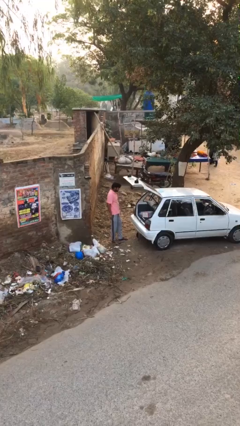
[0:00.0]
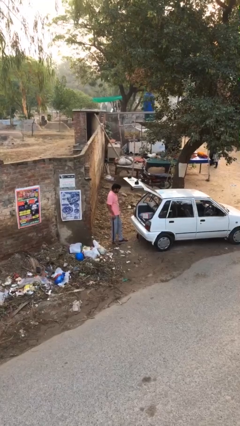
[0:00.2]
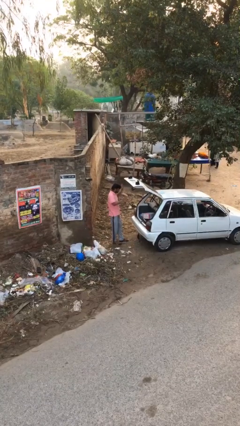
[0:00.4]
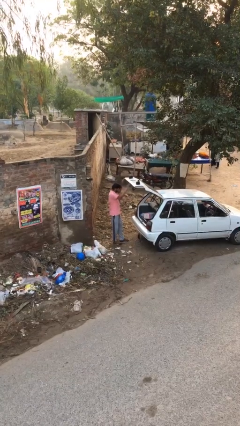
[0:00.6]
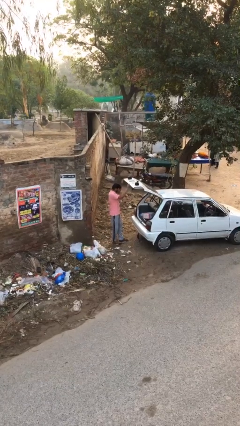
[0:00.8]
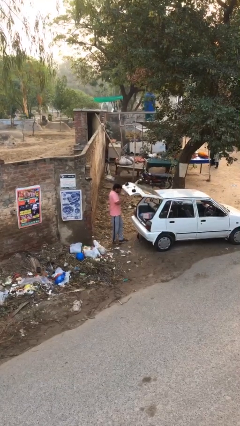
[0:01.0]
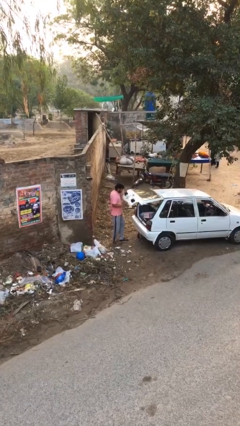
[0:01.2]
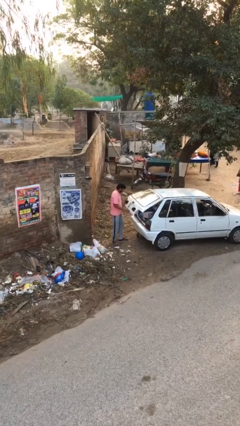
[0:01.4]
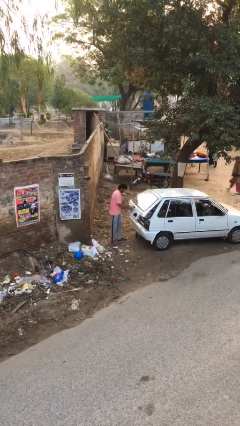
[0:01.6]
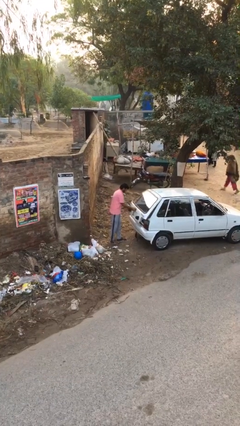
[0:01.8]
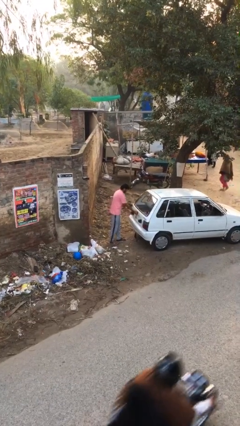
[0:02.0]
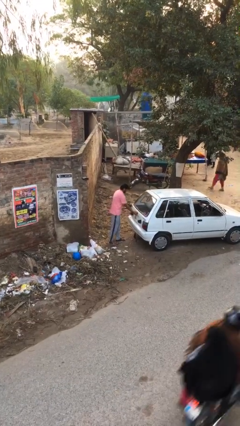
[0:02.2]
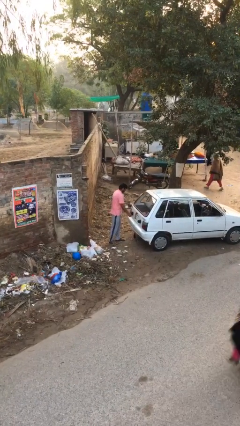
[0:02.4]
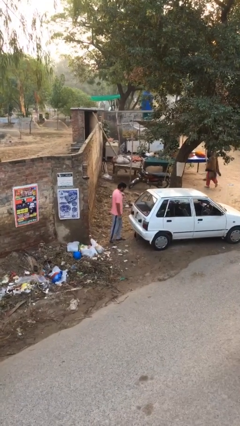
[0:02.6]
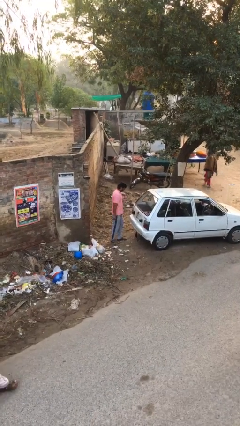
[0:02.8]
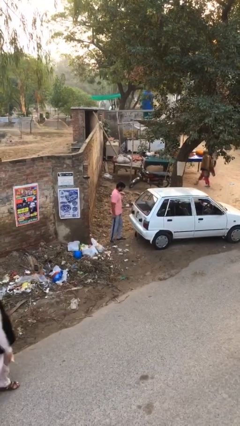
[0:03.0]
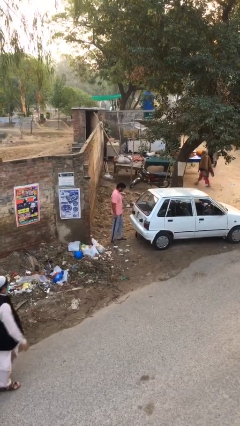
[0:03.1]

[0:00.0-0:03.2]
person closes car trunk

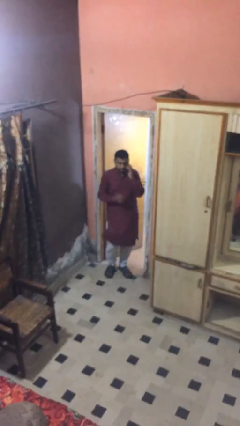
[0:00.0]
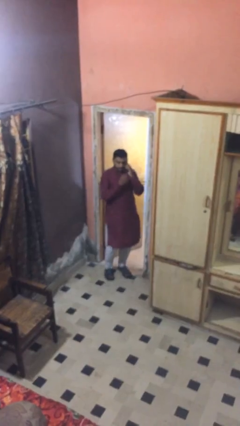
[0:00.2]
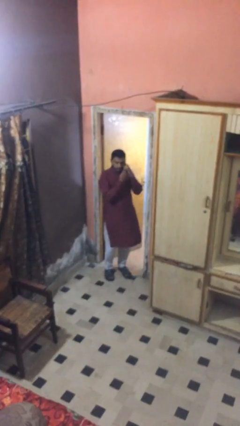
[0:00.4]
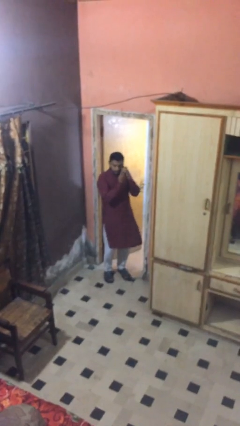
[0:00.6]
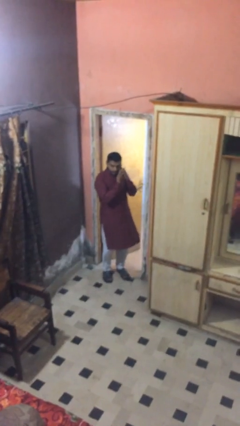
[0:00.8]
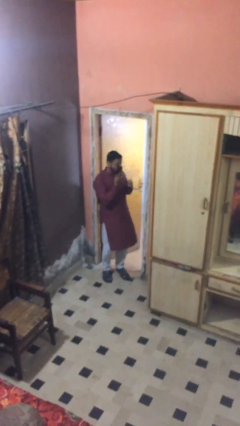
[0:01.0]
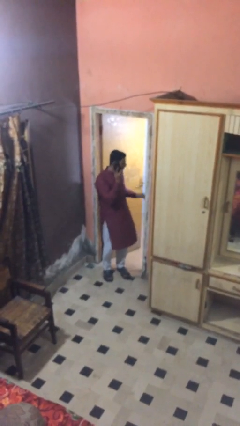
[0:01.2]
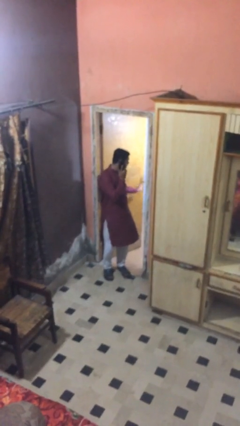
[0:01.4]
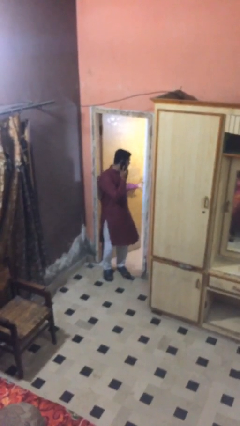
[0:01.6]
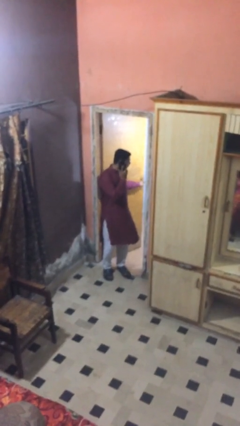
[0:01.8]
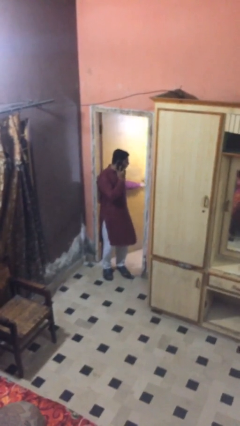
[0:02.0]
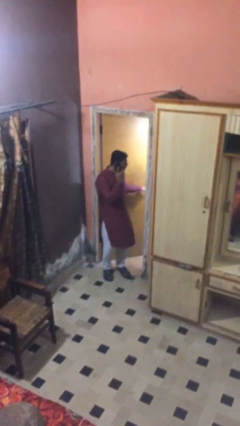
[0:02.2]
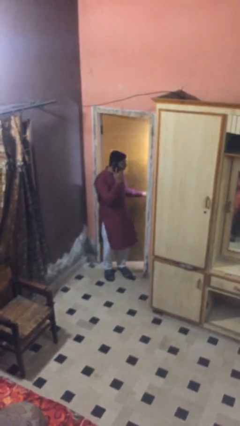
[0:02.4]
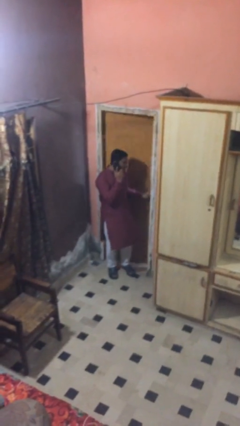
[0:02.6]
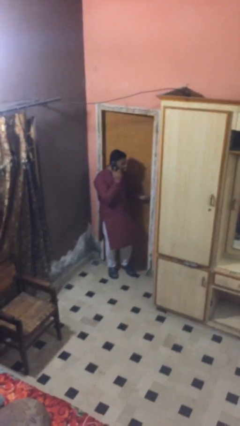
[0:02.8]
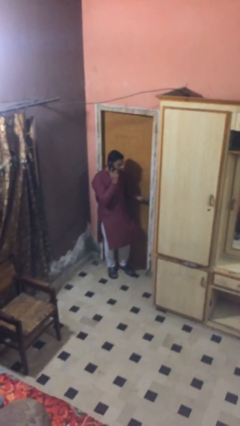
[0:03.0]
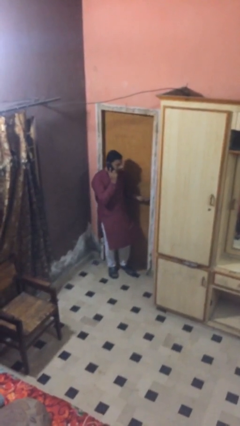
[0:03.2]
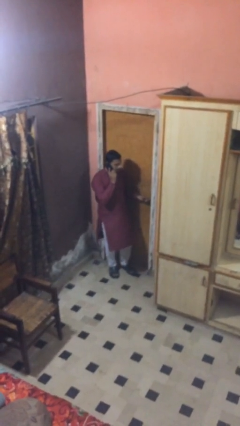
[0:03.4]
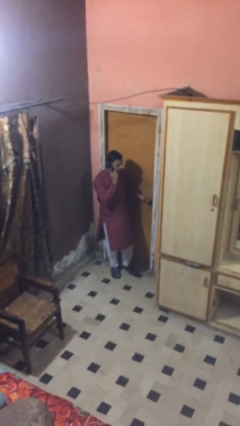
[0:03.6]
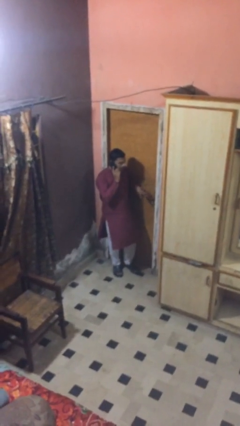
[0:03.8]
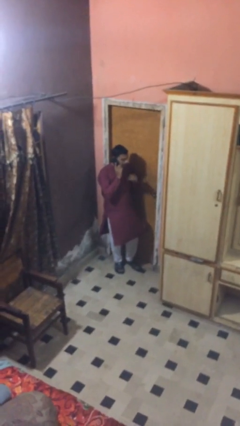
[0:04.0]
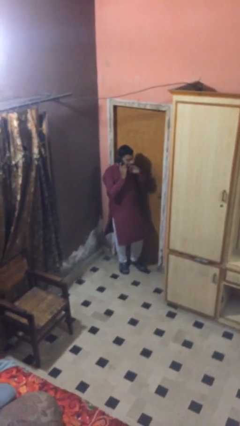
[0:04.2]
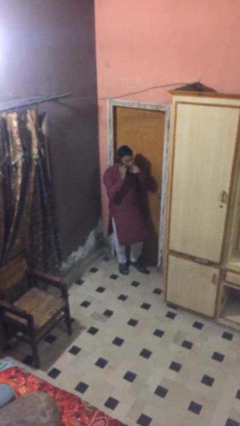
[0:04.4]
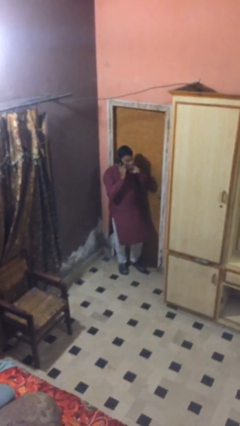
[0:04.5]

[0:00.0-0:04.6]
person closes facility door

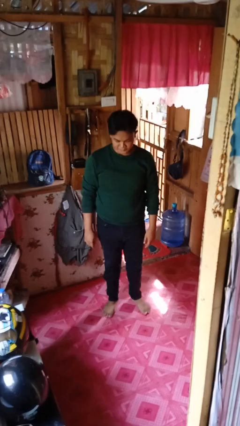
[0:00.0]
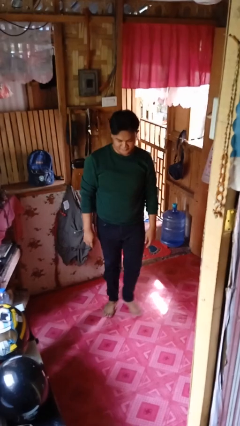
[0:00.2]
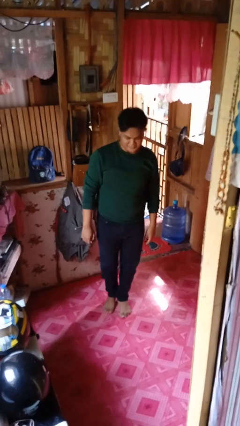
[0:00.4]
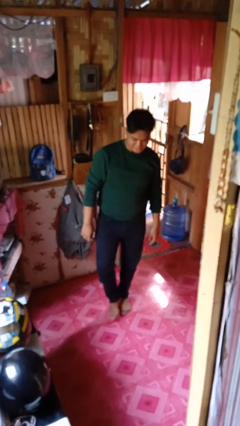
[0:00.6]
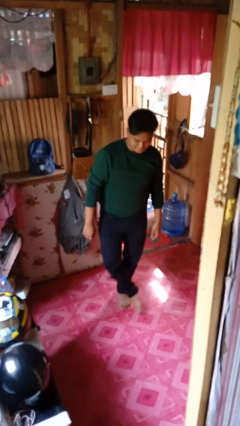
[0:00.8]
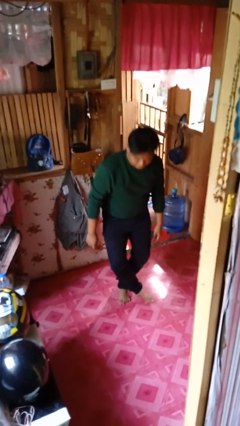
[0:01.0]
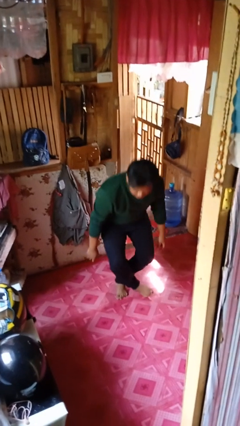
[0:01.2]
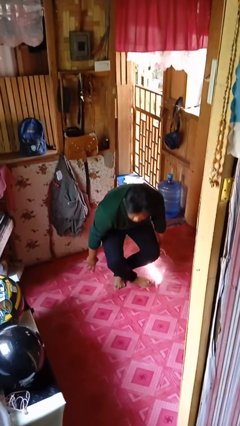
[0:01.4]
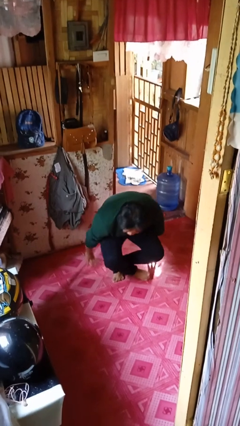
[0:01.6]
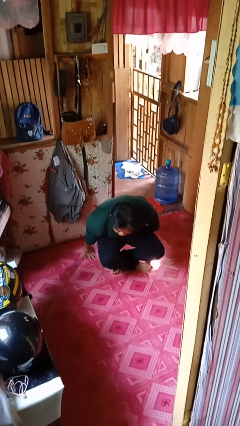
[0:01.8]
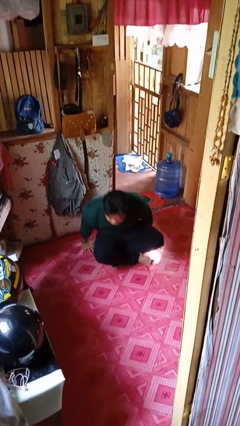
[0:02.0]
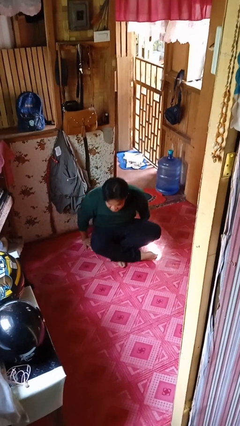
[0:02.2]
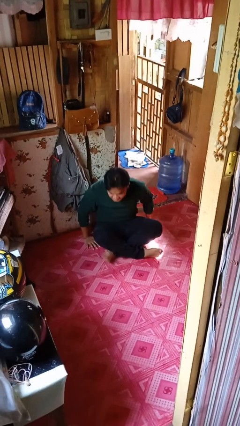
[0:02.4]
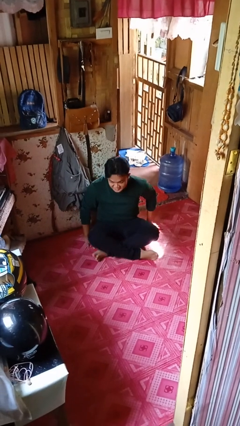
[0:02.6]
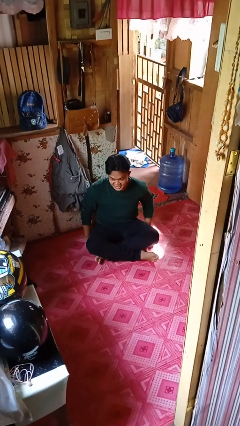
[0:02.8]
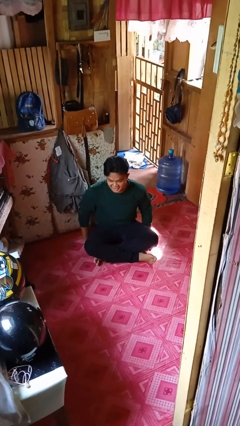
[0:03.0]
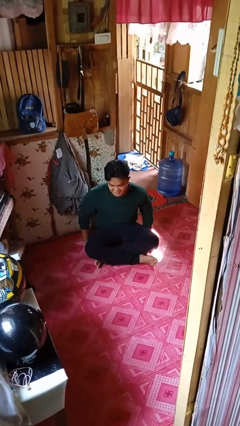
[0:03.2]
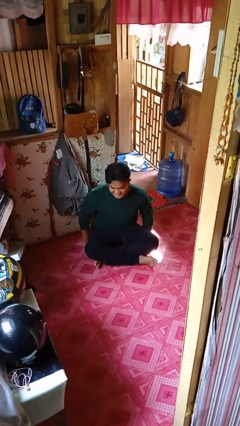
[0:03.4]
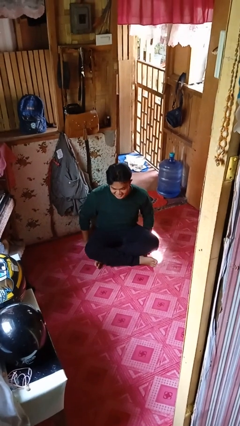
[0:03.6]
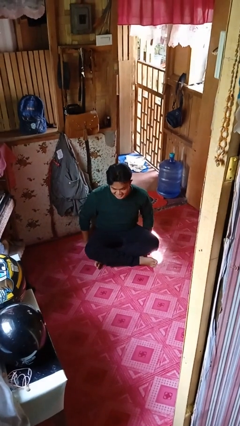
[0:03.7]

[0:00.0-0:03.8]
person sits crisscross

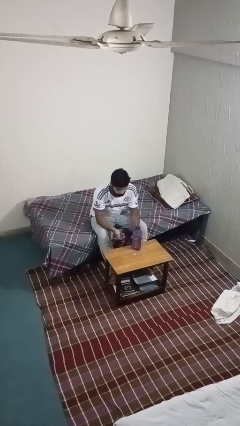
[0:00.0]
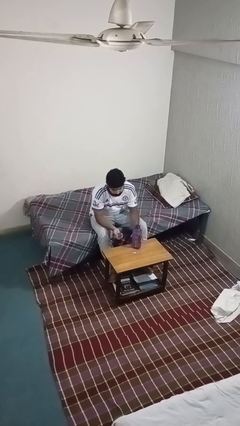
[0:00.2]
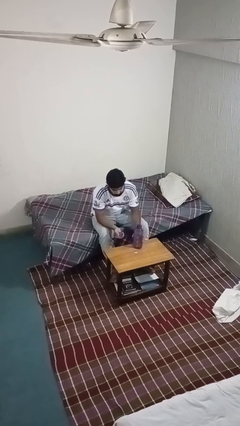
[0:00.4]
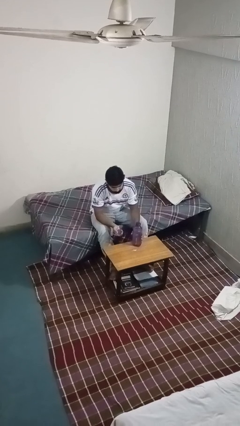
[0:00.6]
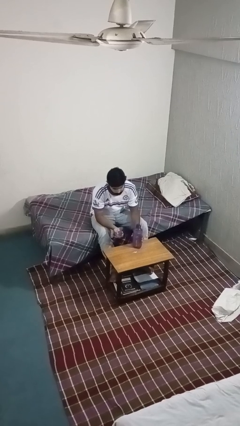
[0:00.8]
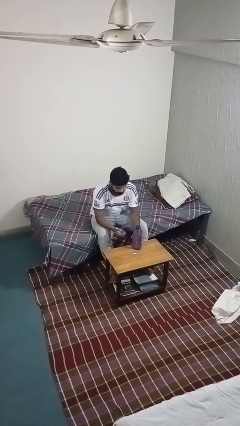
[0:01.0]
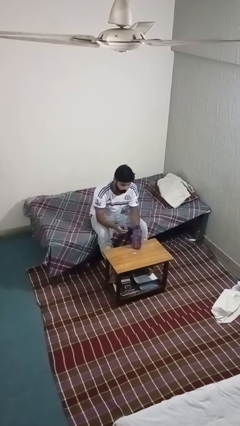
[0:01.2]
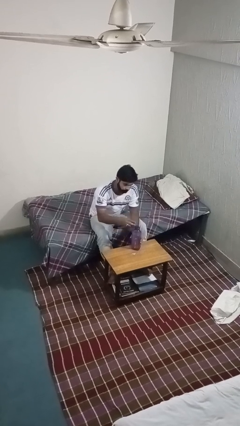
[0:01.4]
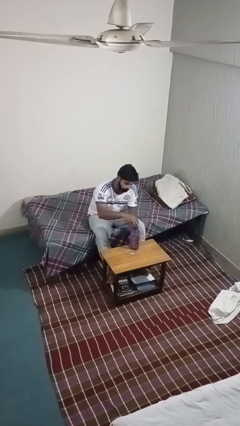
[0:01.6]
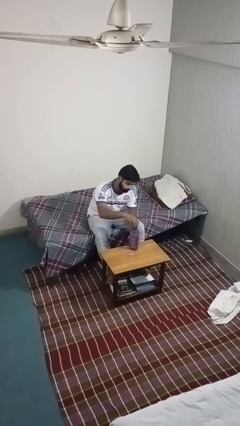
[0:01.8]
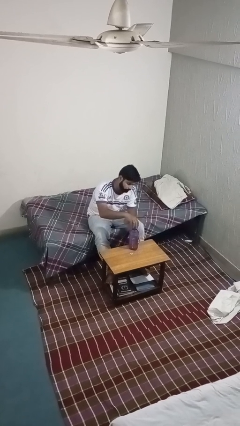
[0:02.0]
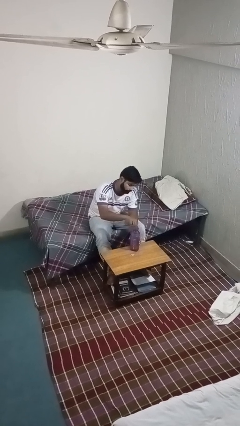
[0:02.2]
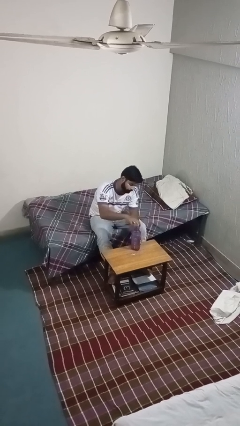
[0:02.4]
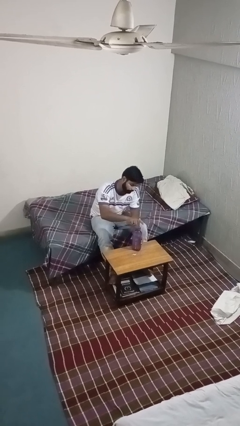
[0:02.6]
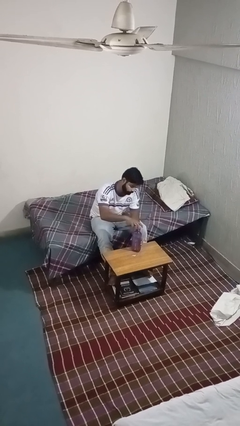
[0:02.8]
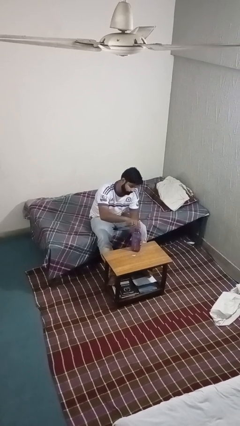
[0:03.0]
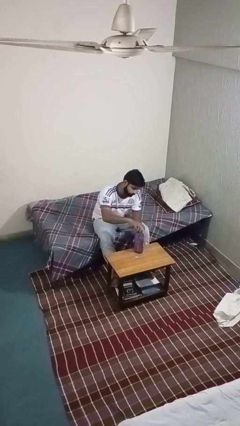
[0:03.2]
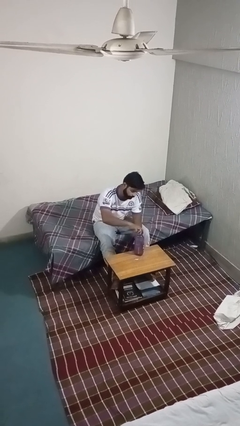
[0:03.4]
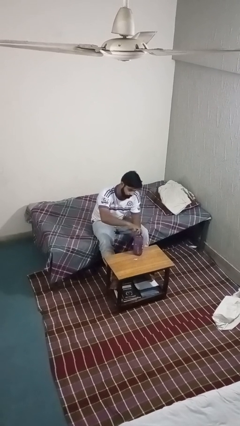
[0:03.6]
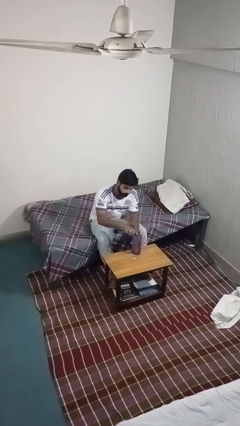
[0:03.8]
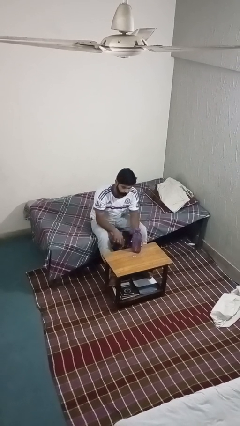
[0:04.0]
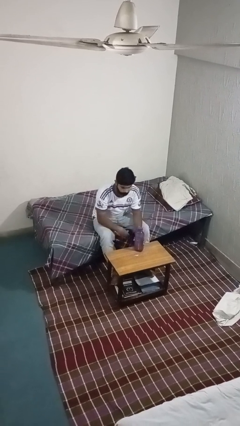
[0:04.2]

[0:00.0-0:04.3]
person screws lid to bottle

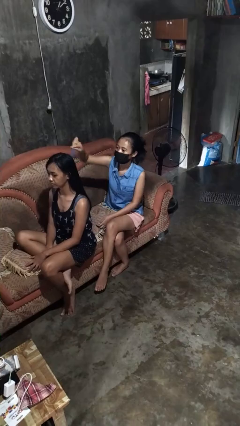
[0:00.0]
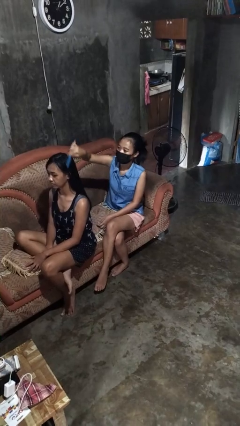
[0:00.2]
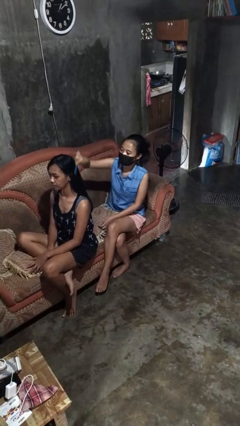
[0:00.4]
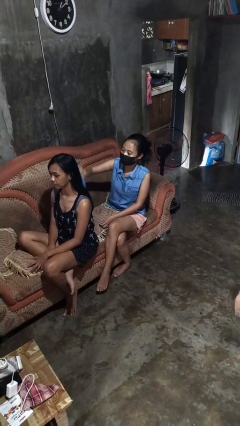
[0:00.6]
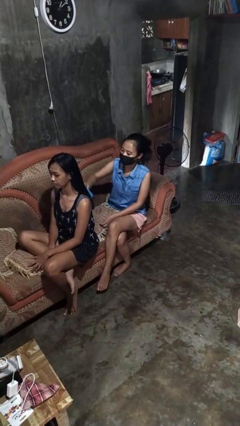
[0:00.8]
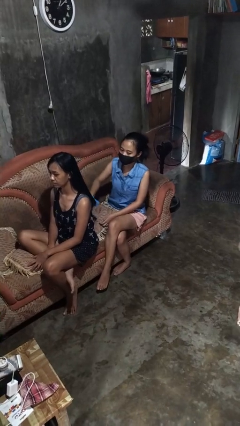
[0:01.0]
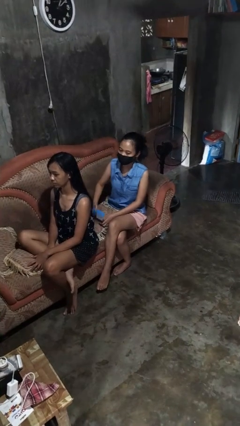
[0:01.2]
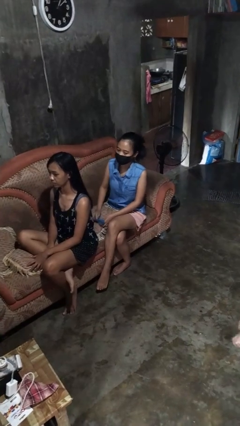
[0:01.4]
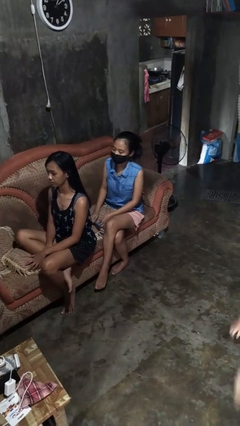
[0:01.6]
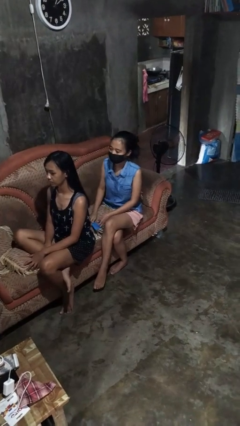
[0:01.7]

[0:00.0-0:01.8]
person brushes hair of person

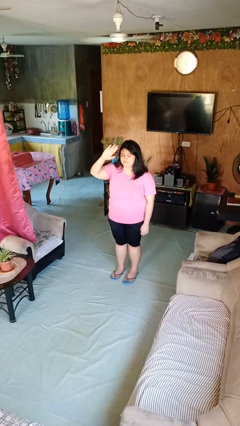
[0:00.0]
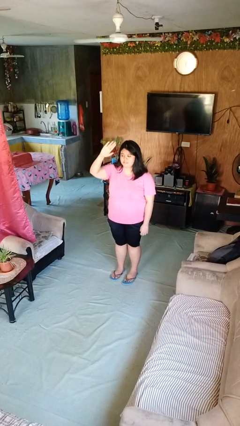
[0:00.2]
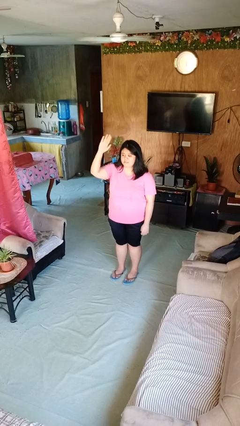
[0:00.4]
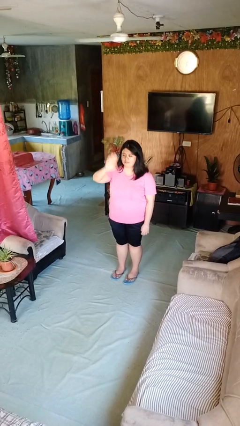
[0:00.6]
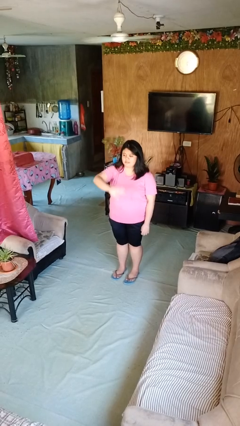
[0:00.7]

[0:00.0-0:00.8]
person gestures swipe down
